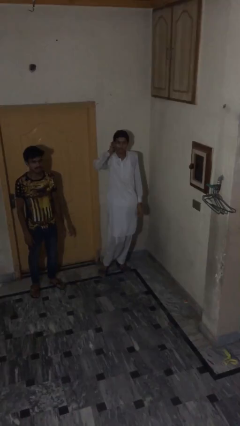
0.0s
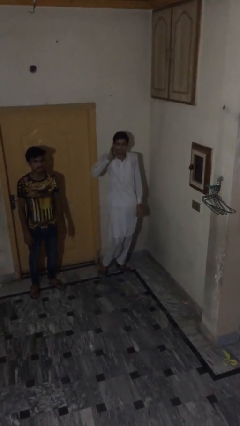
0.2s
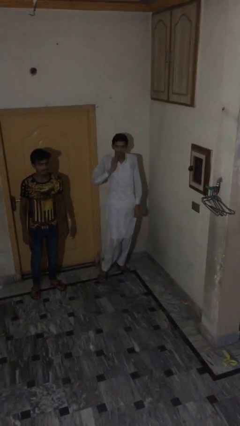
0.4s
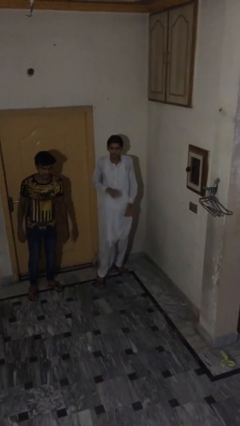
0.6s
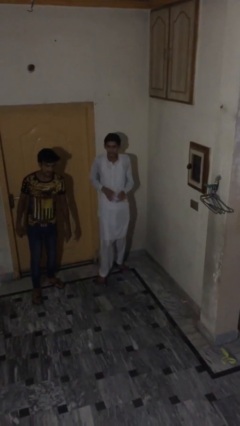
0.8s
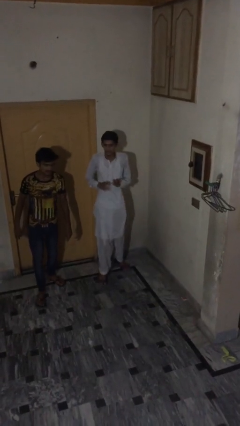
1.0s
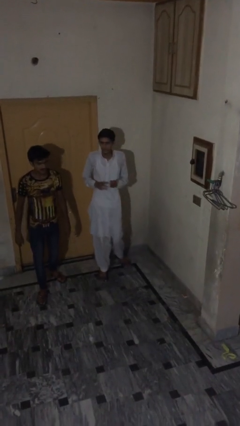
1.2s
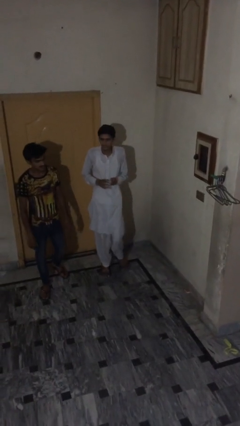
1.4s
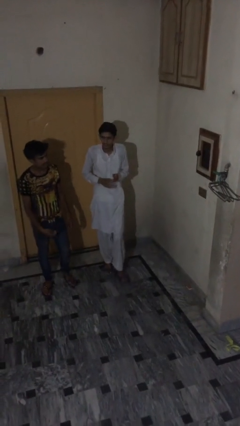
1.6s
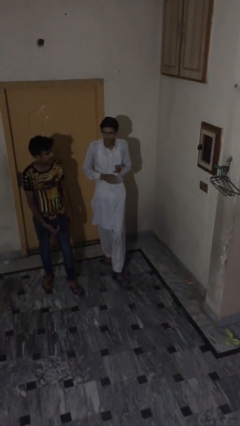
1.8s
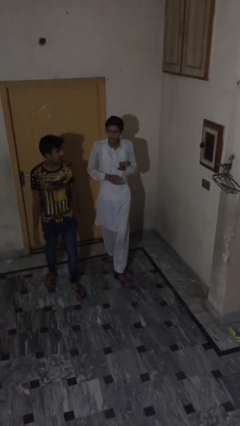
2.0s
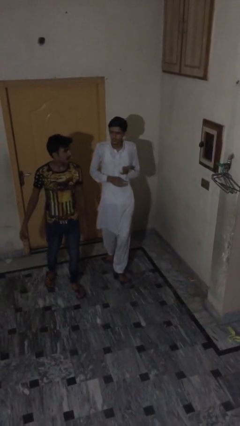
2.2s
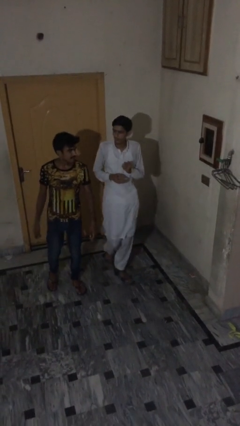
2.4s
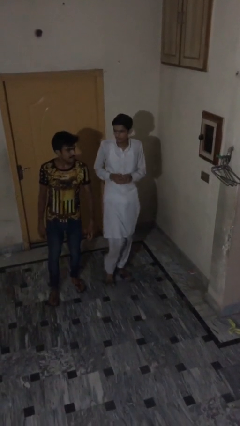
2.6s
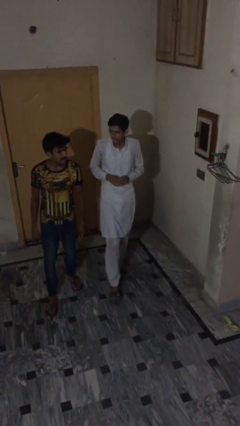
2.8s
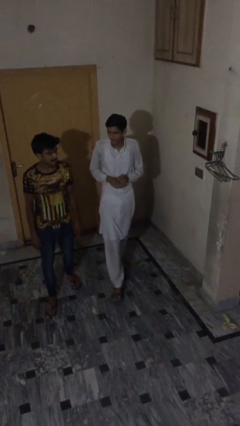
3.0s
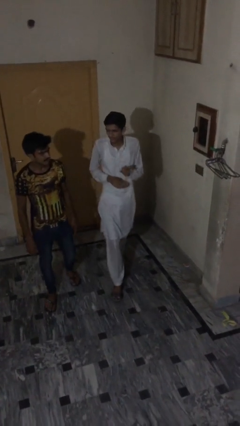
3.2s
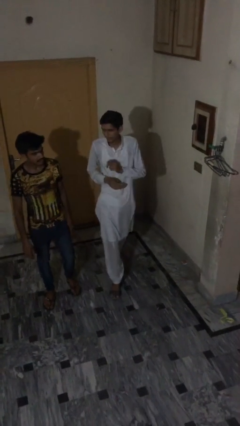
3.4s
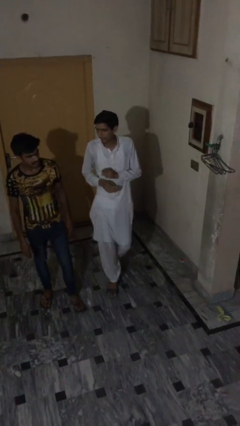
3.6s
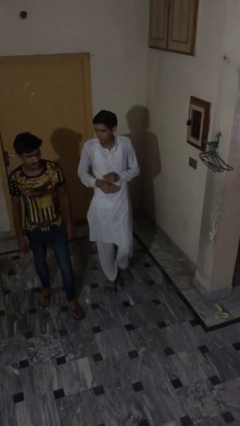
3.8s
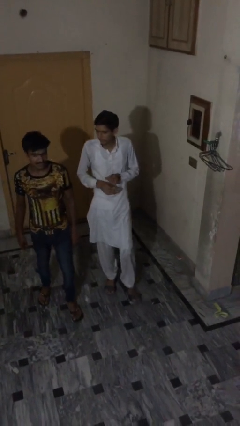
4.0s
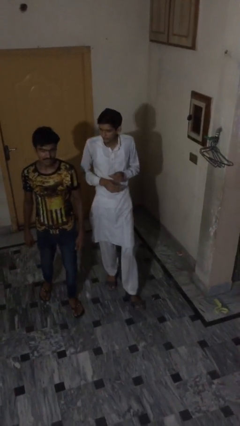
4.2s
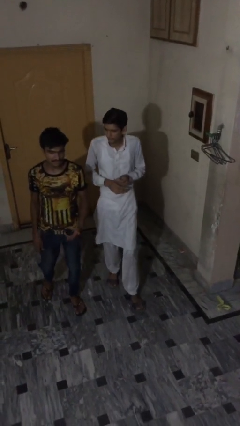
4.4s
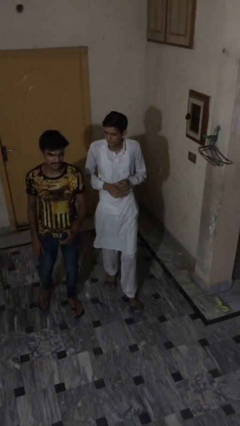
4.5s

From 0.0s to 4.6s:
person talks to person

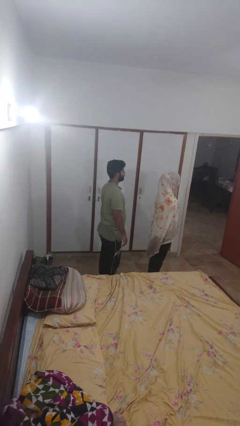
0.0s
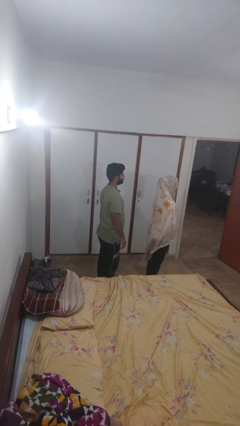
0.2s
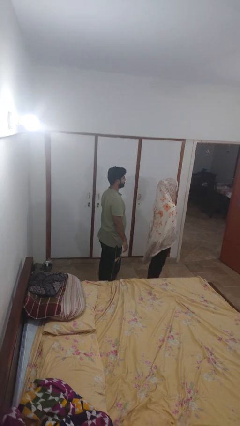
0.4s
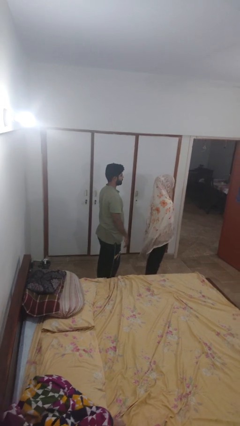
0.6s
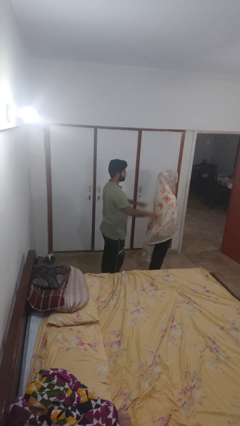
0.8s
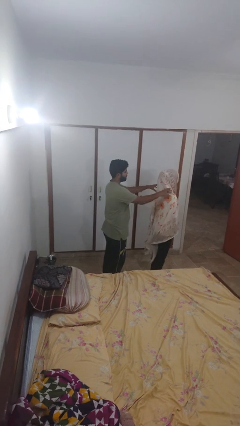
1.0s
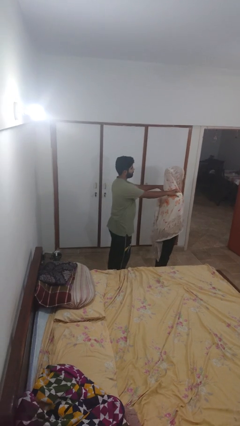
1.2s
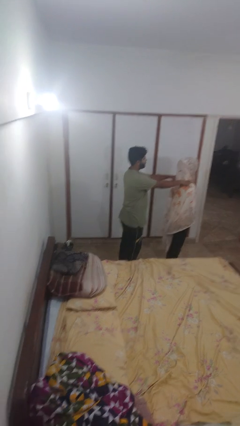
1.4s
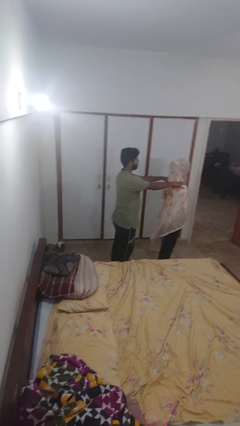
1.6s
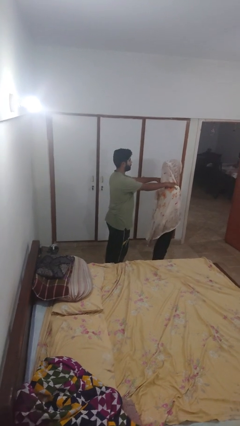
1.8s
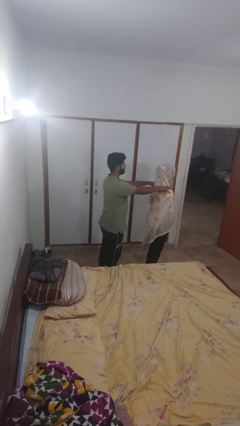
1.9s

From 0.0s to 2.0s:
person grabs person by shoulder

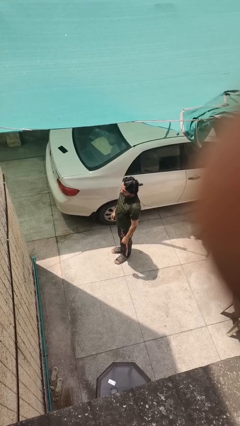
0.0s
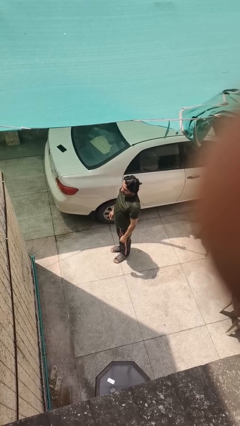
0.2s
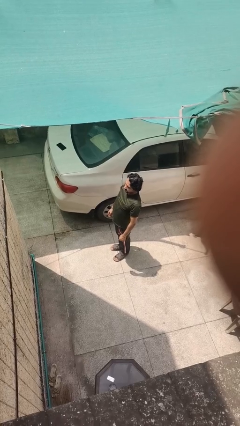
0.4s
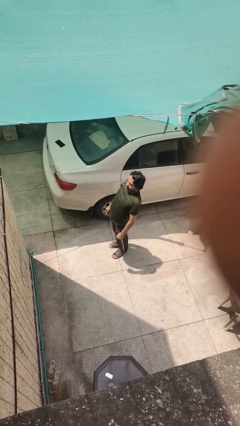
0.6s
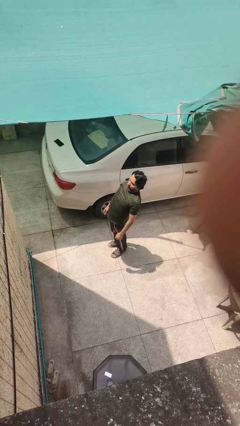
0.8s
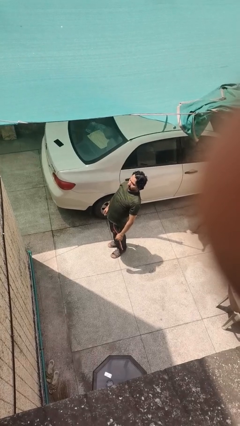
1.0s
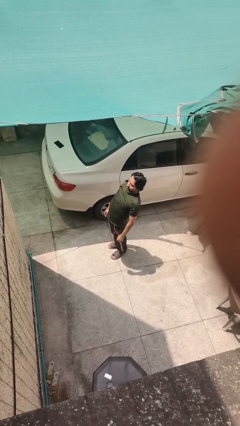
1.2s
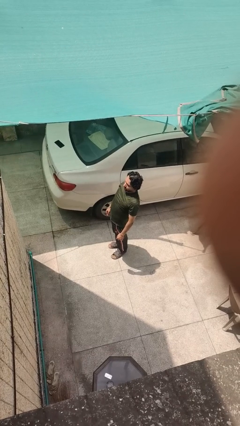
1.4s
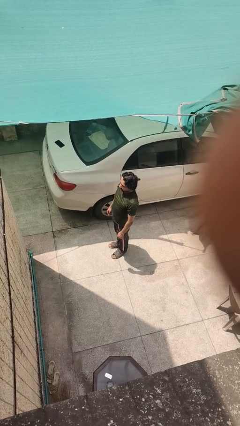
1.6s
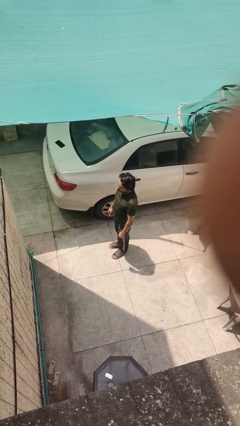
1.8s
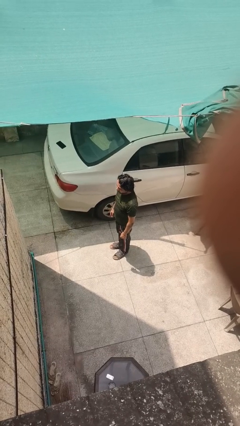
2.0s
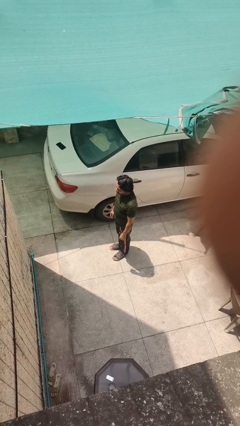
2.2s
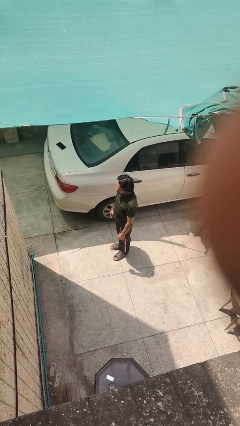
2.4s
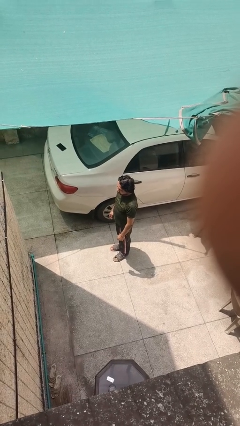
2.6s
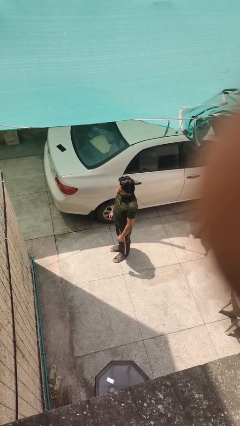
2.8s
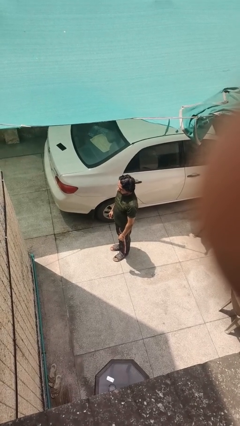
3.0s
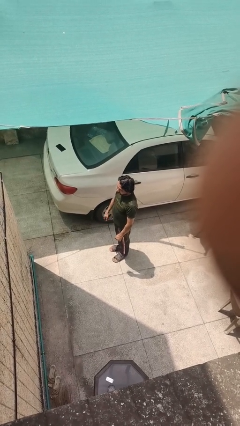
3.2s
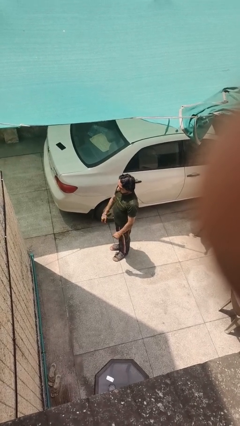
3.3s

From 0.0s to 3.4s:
person stretches back

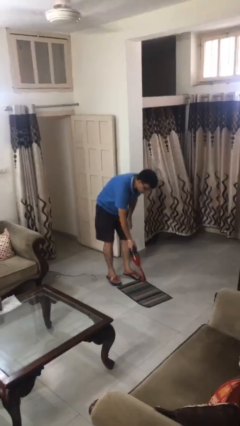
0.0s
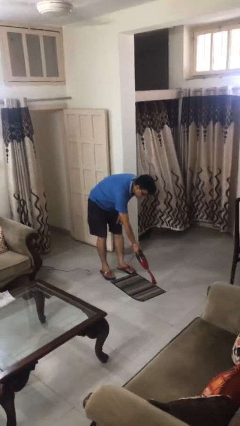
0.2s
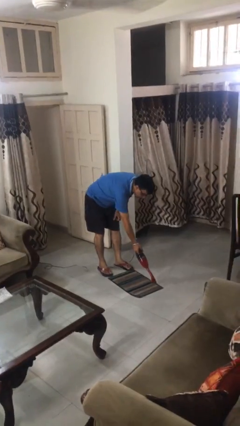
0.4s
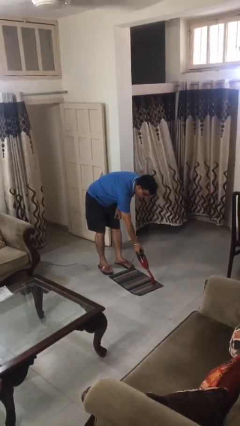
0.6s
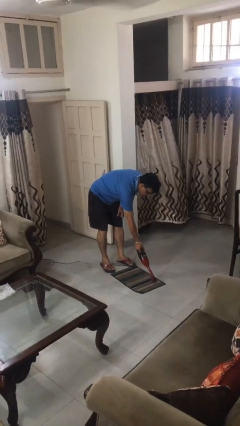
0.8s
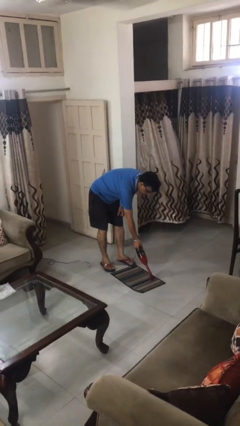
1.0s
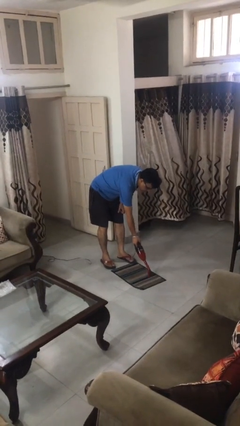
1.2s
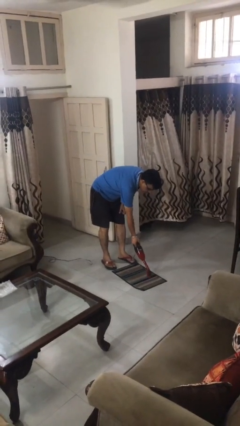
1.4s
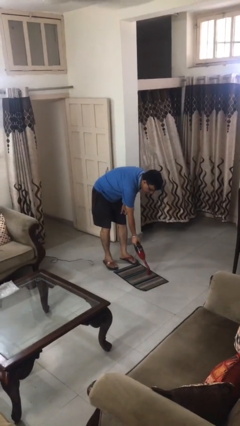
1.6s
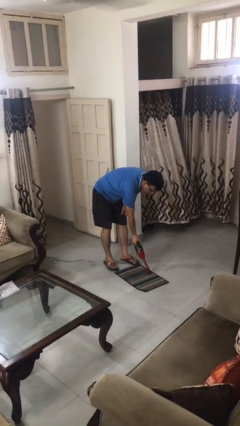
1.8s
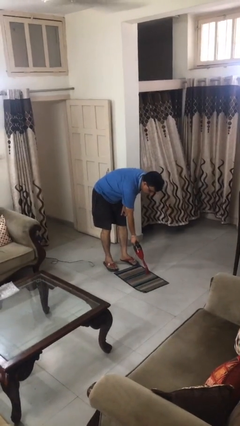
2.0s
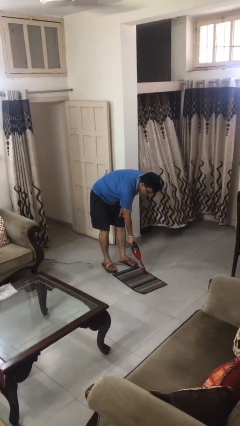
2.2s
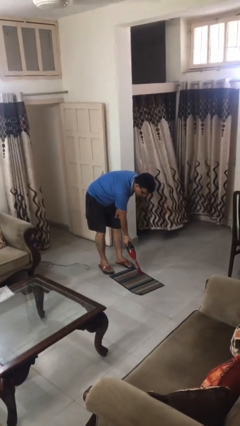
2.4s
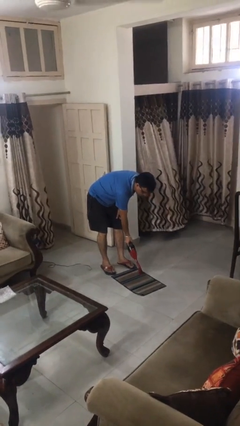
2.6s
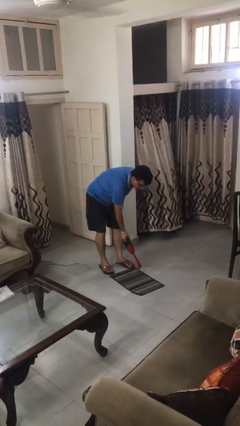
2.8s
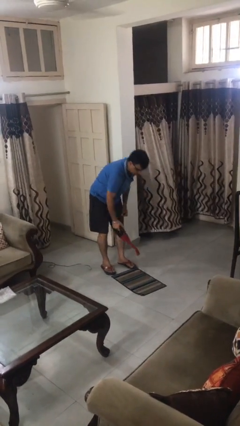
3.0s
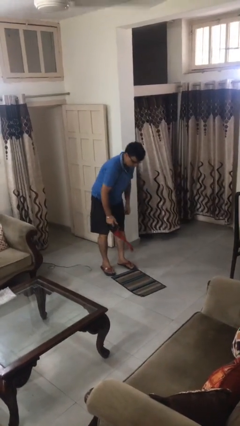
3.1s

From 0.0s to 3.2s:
person vacuums carpet

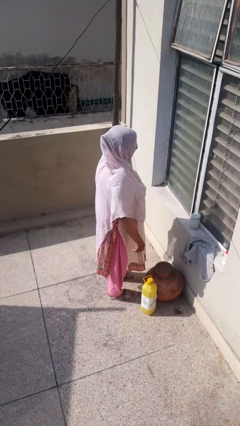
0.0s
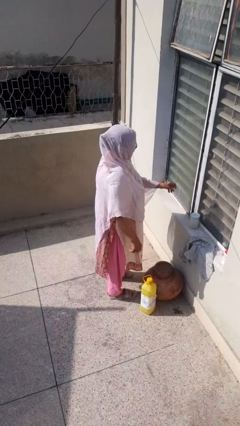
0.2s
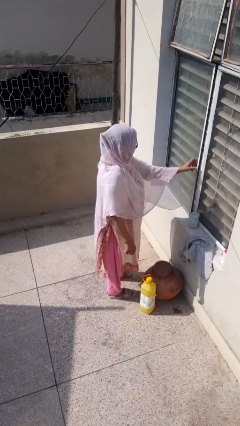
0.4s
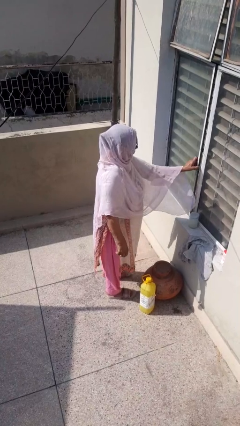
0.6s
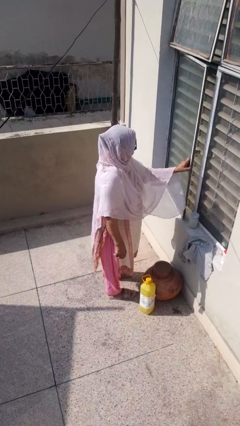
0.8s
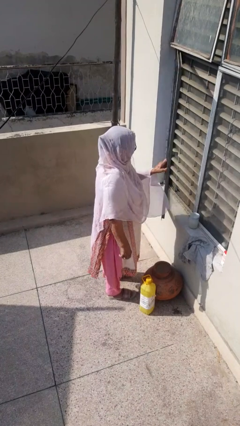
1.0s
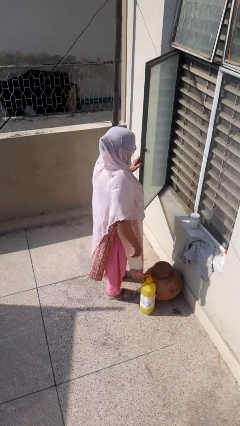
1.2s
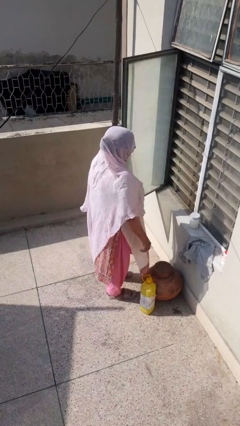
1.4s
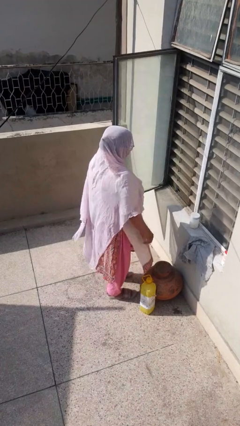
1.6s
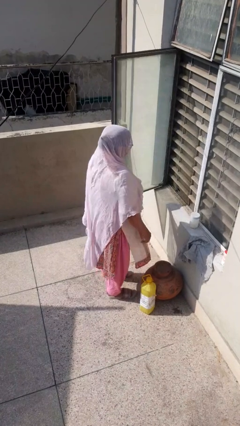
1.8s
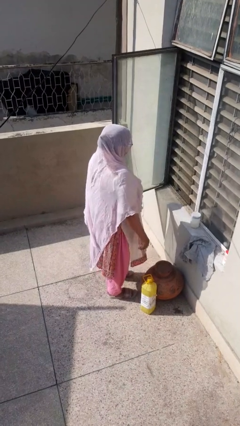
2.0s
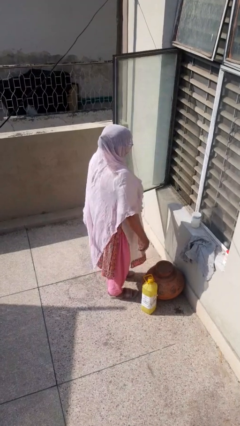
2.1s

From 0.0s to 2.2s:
person opens home window

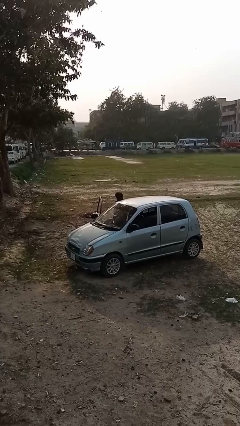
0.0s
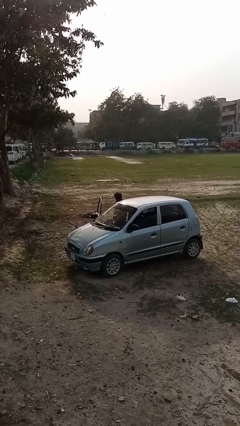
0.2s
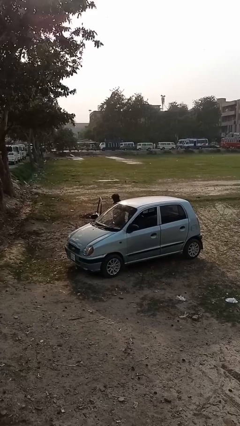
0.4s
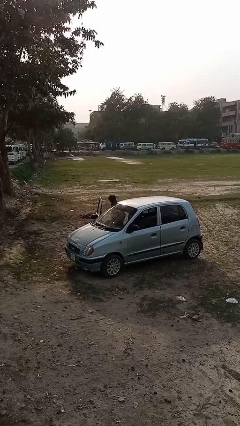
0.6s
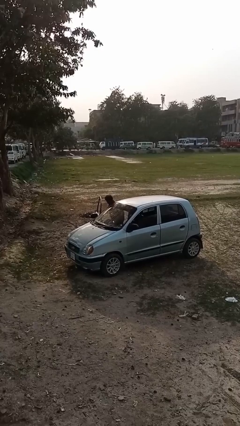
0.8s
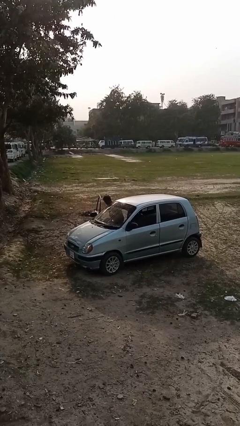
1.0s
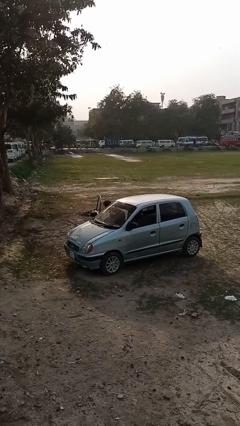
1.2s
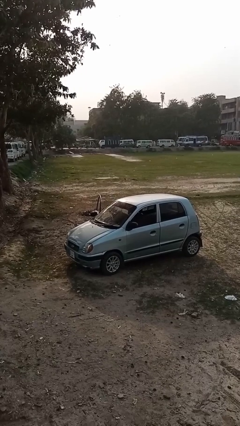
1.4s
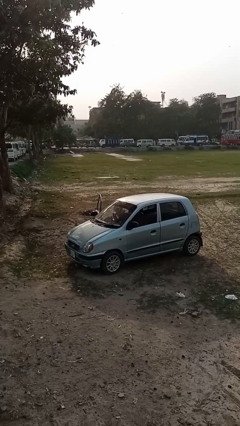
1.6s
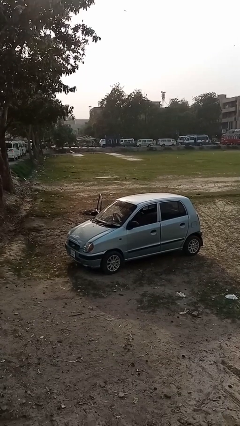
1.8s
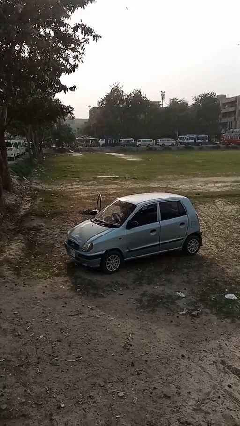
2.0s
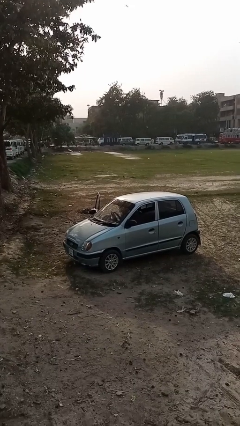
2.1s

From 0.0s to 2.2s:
person enters car
